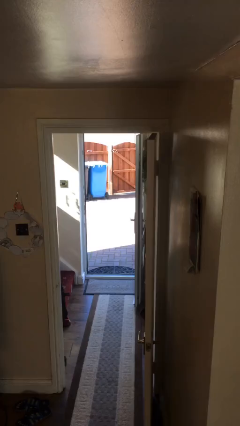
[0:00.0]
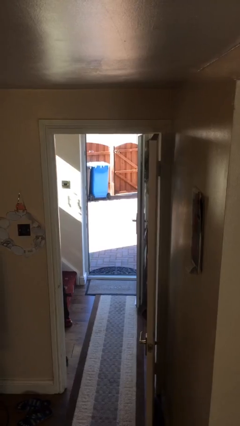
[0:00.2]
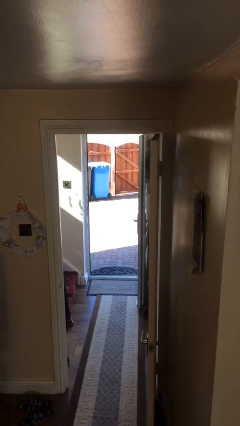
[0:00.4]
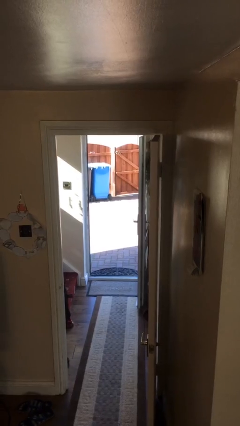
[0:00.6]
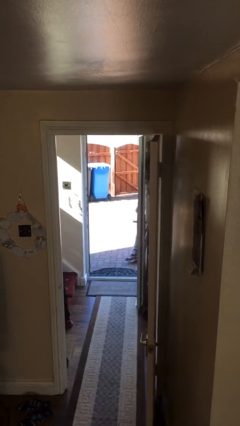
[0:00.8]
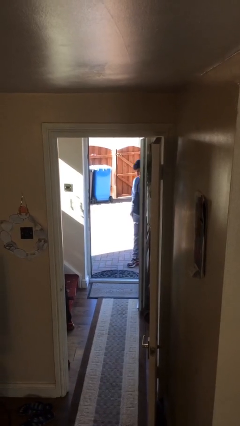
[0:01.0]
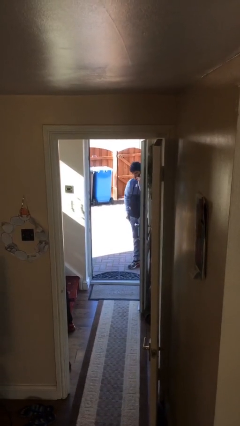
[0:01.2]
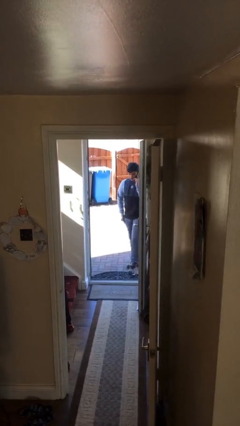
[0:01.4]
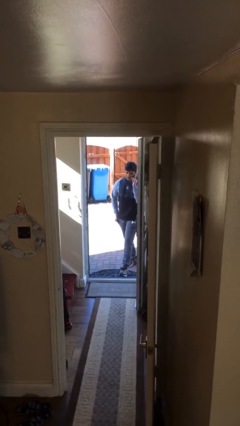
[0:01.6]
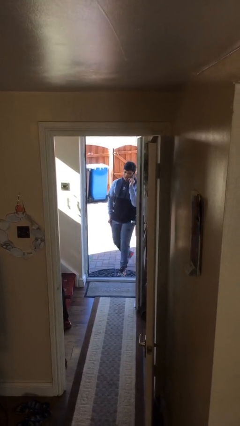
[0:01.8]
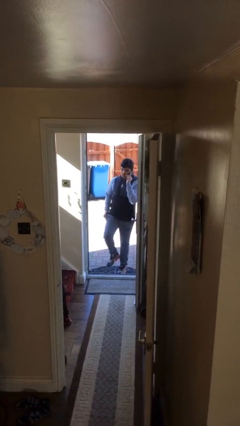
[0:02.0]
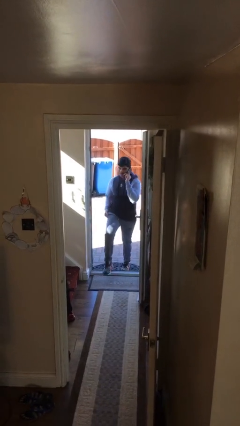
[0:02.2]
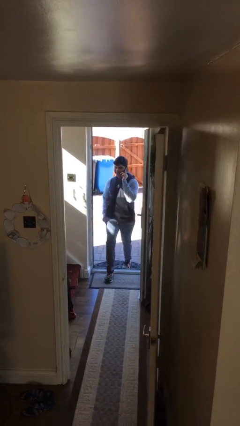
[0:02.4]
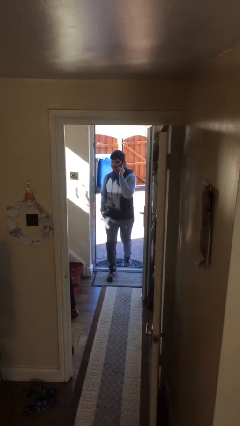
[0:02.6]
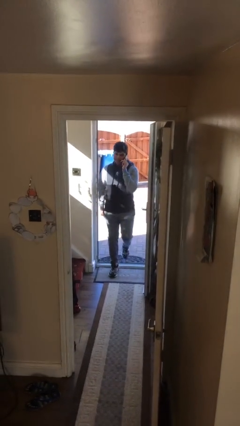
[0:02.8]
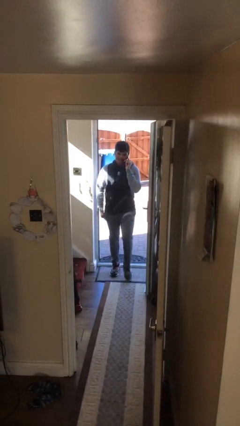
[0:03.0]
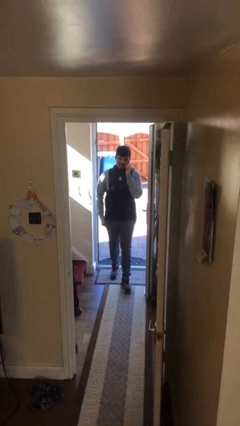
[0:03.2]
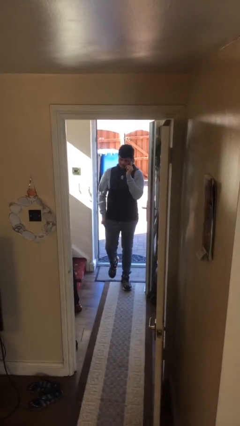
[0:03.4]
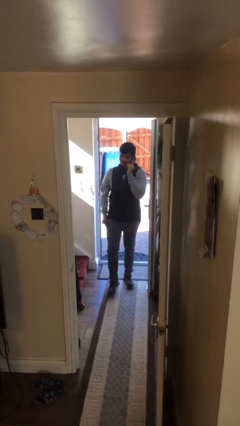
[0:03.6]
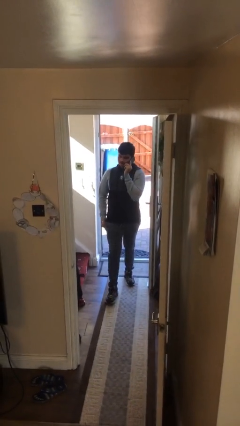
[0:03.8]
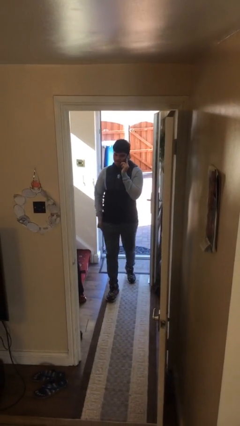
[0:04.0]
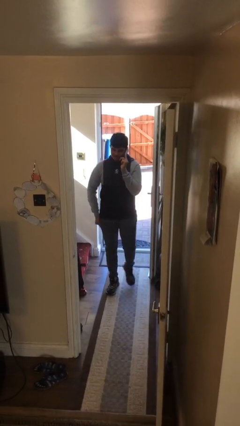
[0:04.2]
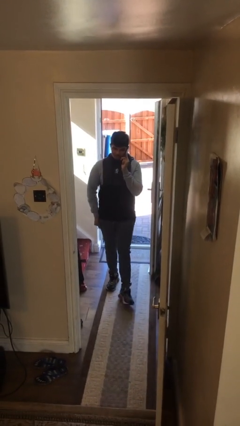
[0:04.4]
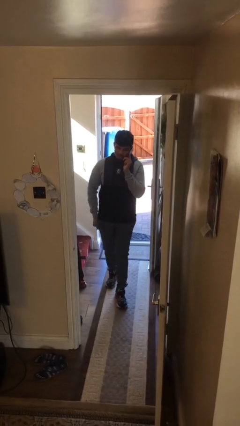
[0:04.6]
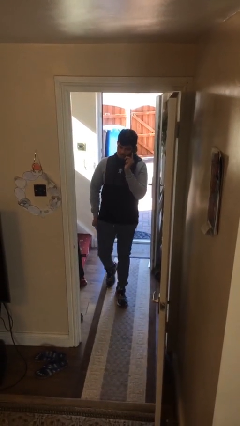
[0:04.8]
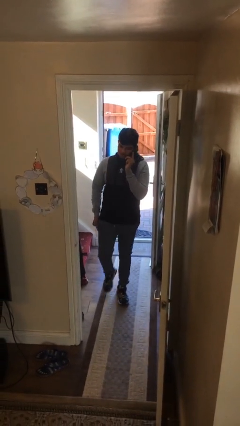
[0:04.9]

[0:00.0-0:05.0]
person enters scene through structure

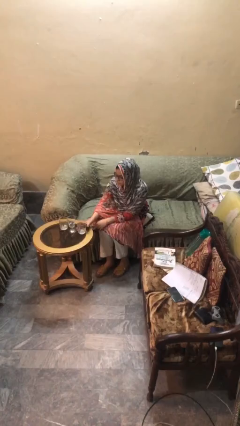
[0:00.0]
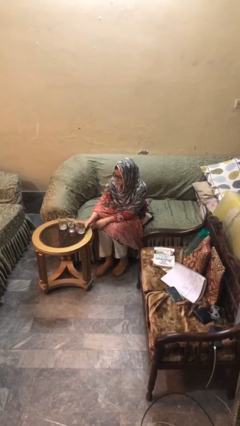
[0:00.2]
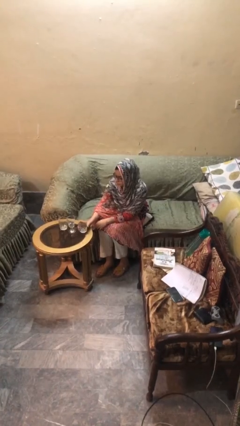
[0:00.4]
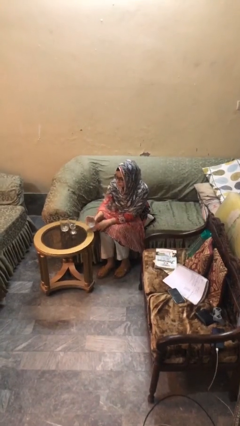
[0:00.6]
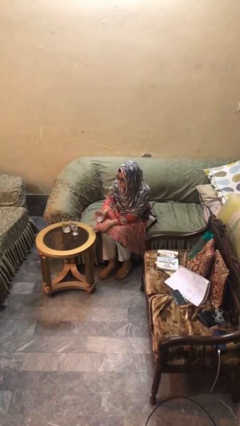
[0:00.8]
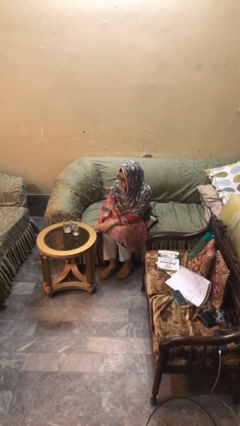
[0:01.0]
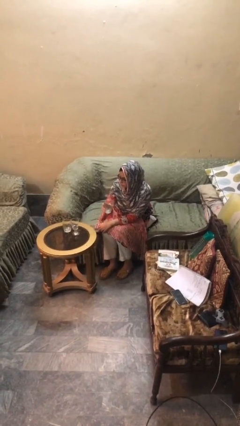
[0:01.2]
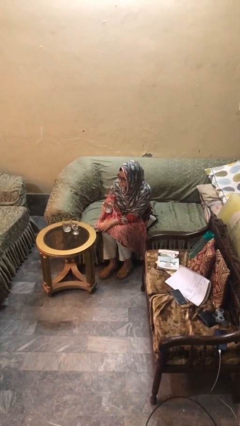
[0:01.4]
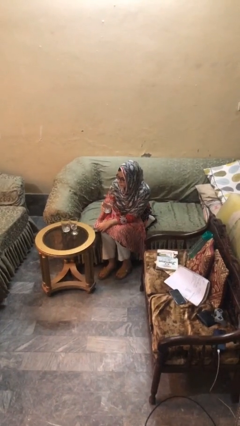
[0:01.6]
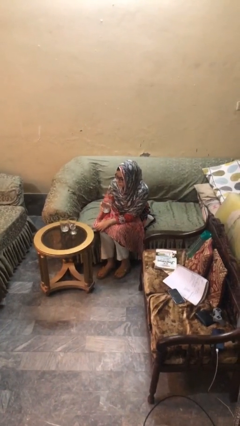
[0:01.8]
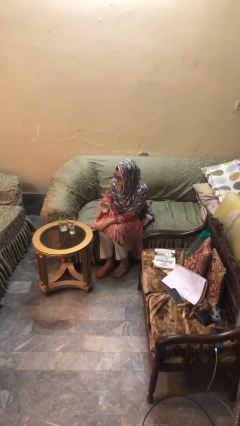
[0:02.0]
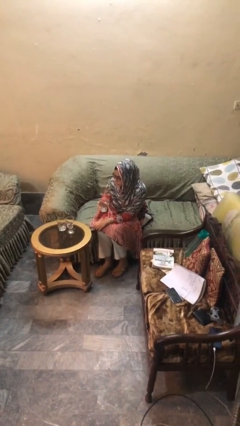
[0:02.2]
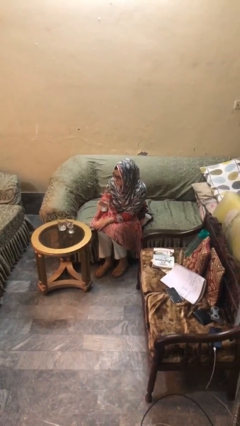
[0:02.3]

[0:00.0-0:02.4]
person picks up object from table

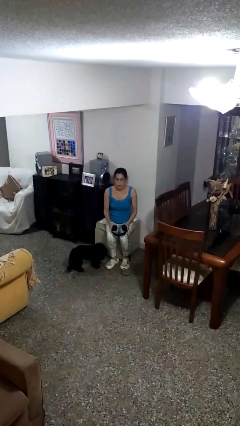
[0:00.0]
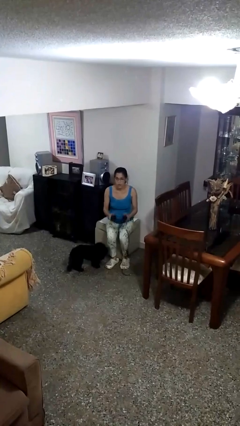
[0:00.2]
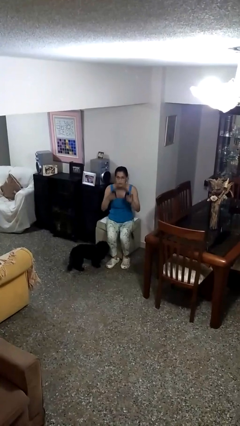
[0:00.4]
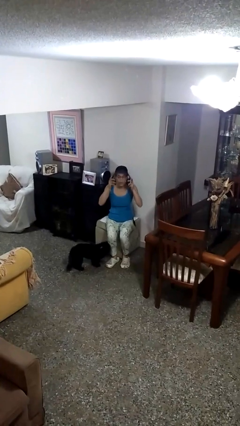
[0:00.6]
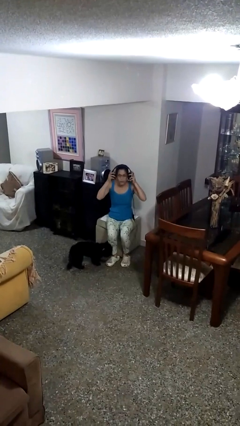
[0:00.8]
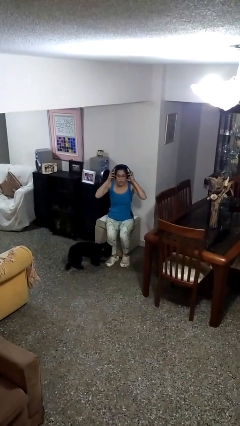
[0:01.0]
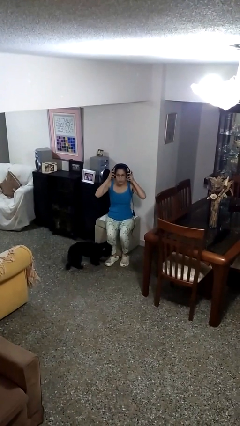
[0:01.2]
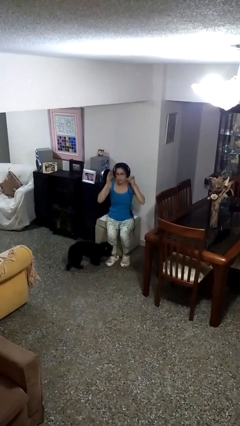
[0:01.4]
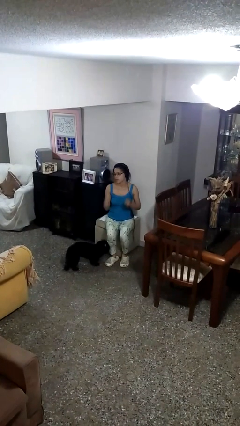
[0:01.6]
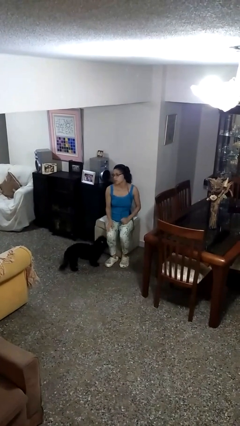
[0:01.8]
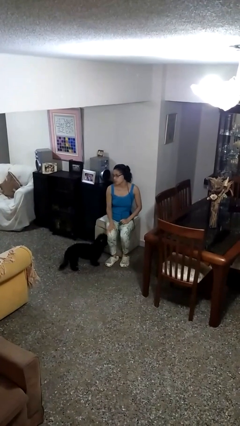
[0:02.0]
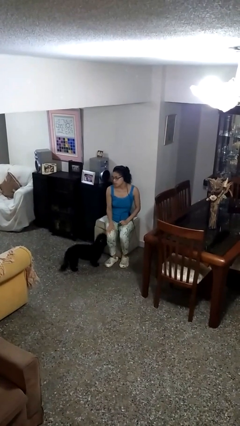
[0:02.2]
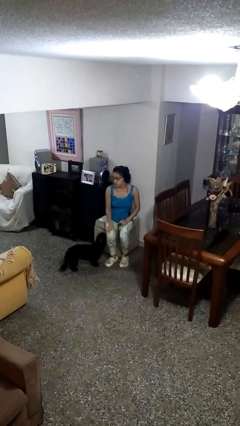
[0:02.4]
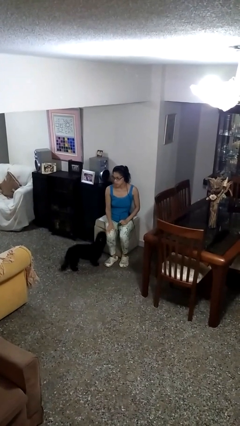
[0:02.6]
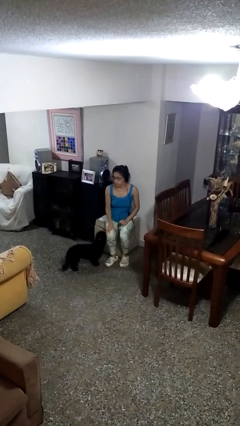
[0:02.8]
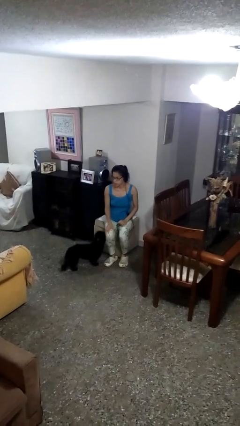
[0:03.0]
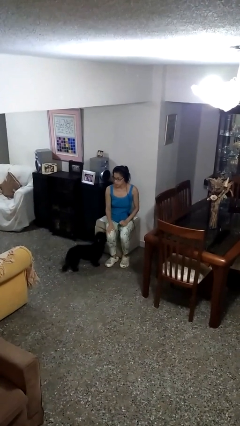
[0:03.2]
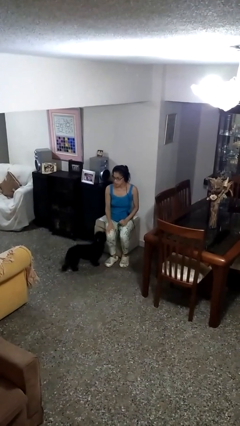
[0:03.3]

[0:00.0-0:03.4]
person puts on headphones

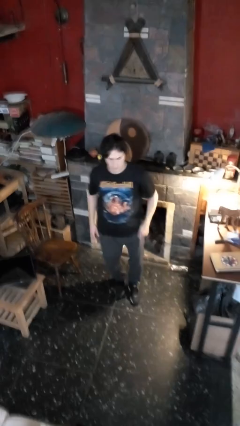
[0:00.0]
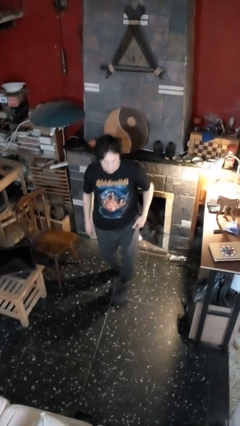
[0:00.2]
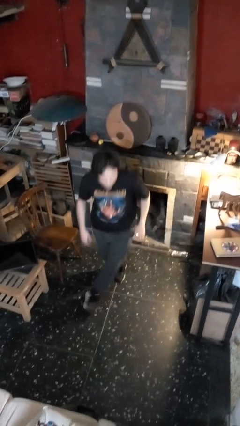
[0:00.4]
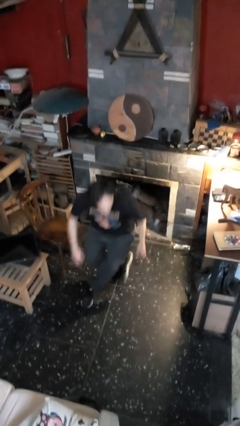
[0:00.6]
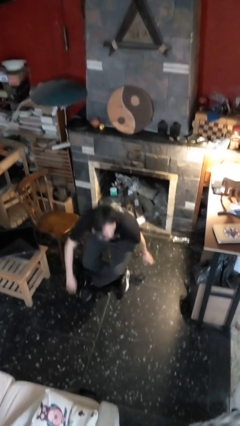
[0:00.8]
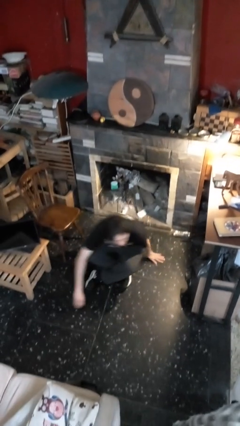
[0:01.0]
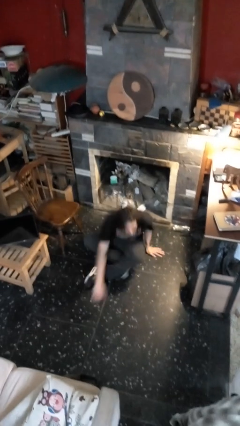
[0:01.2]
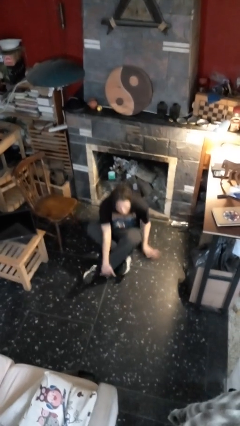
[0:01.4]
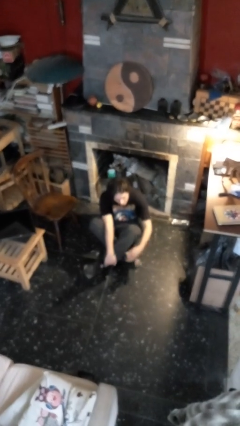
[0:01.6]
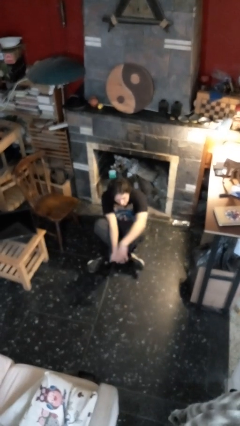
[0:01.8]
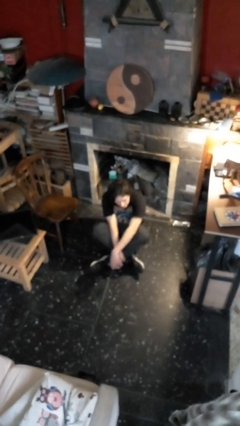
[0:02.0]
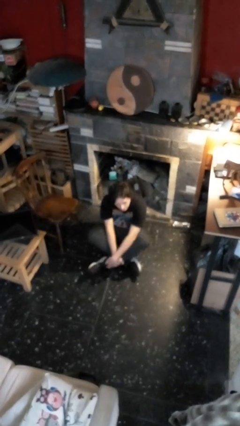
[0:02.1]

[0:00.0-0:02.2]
person sits crisscross

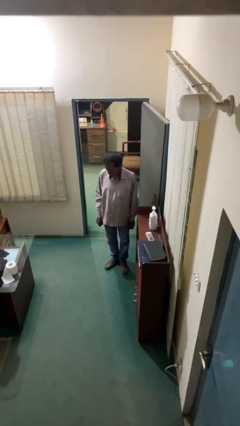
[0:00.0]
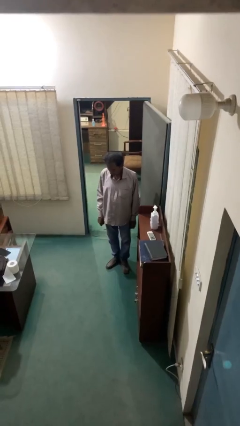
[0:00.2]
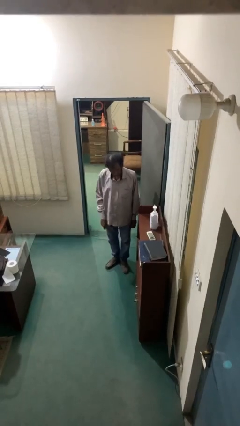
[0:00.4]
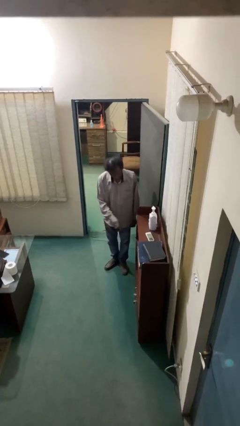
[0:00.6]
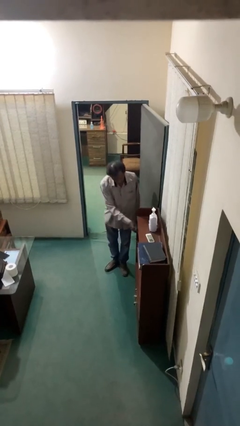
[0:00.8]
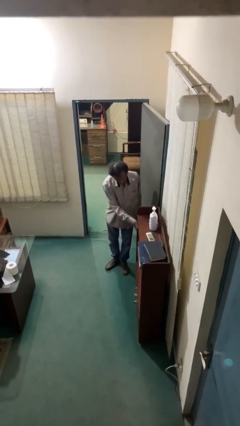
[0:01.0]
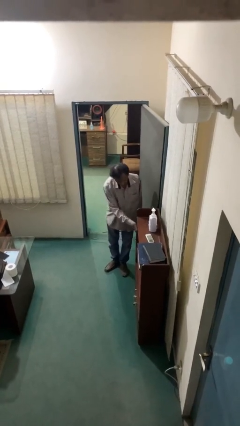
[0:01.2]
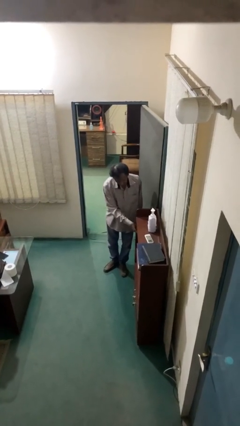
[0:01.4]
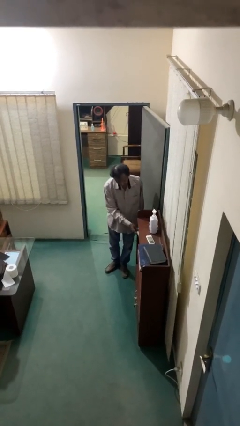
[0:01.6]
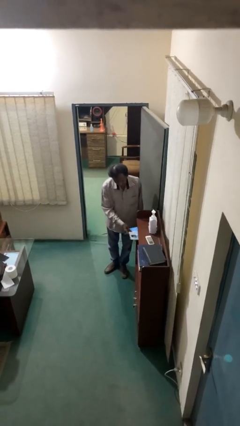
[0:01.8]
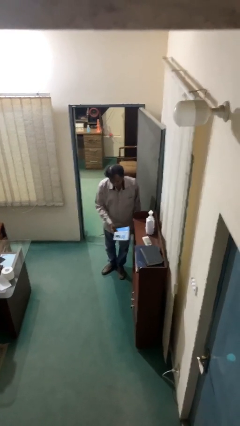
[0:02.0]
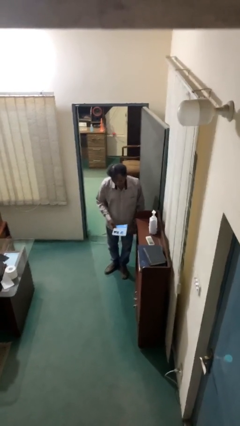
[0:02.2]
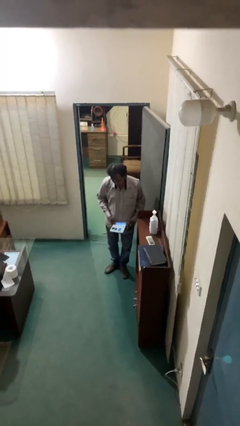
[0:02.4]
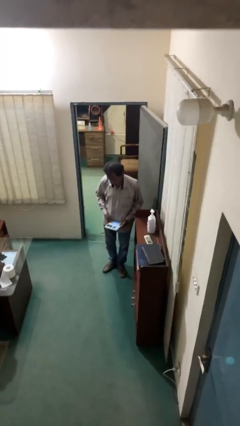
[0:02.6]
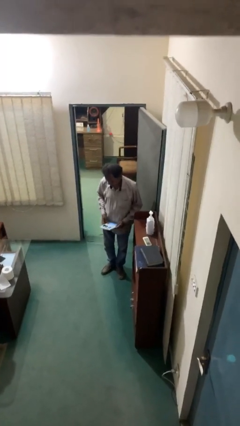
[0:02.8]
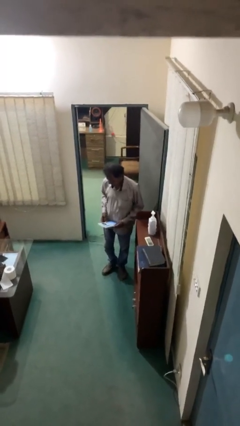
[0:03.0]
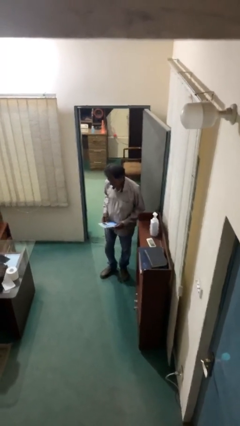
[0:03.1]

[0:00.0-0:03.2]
person picks up object from shelf

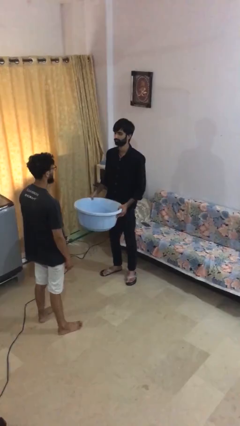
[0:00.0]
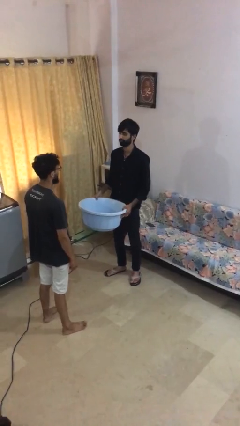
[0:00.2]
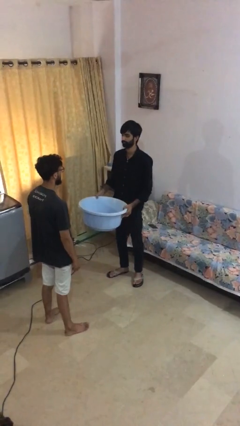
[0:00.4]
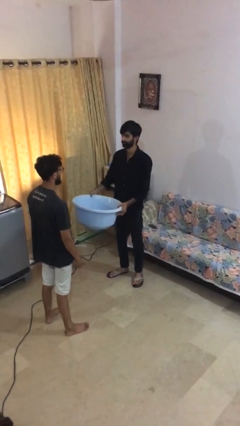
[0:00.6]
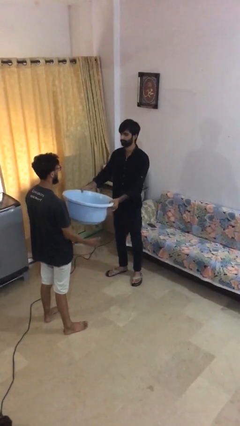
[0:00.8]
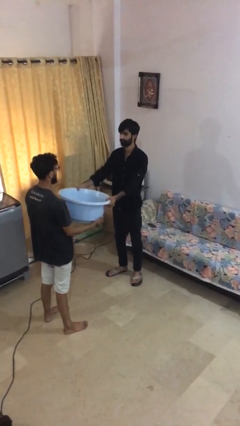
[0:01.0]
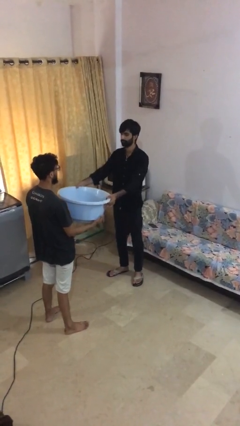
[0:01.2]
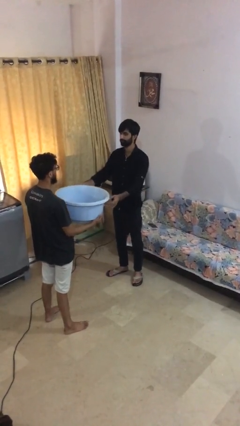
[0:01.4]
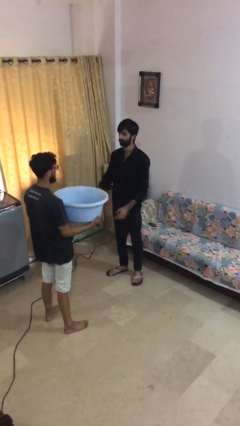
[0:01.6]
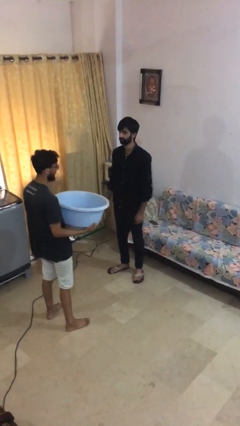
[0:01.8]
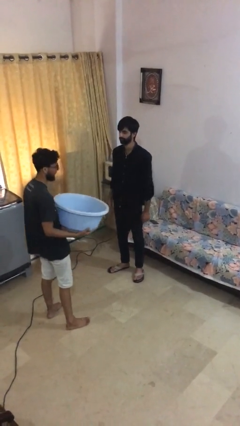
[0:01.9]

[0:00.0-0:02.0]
person transfers object to person
